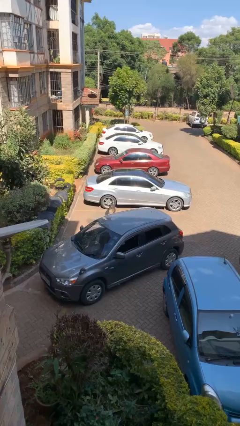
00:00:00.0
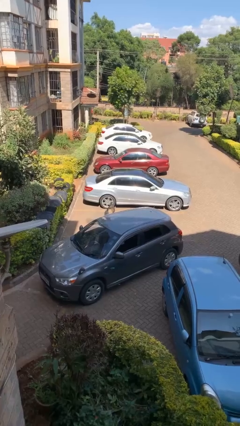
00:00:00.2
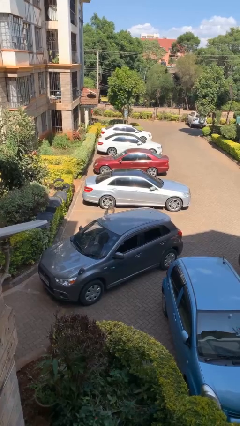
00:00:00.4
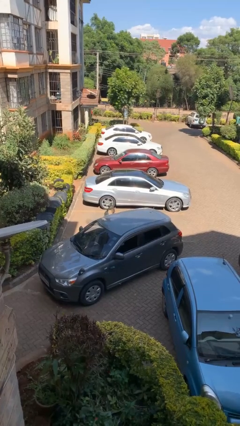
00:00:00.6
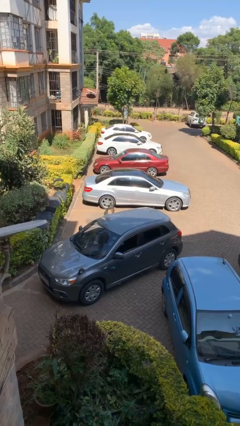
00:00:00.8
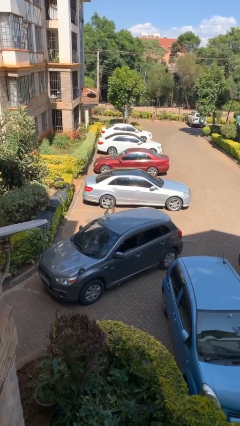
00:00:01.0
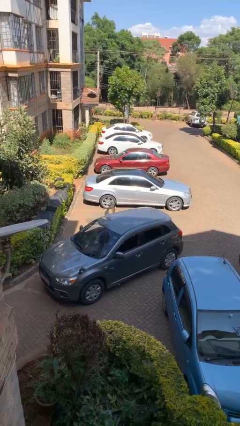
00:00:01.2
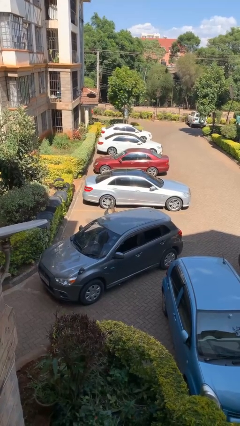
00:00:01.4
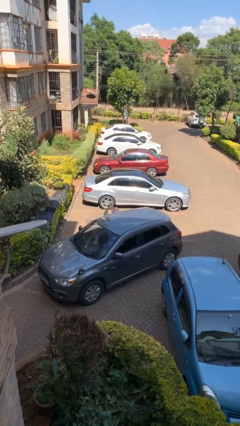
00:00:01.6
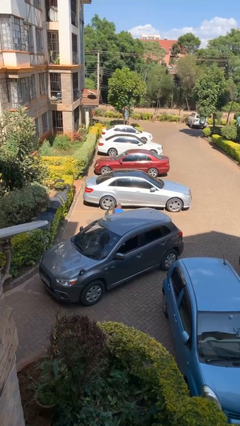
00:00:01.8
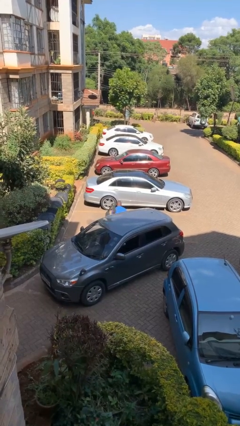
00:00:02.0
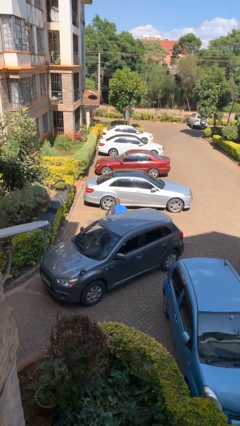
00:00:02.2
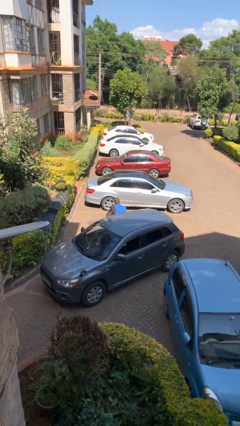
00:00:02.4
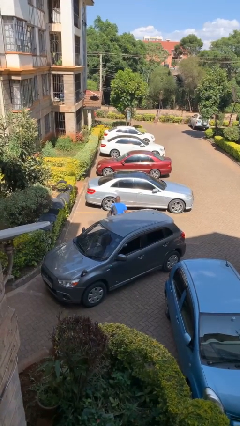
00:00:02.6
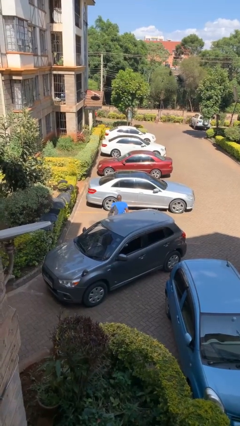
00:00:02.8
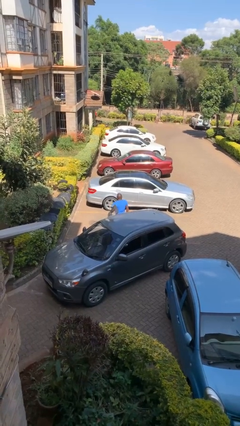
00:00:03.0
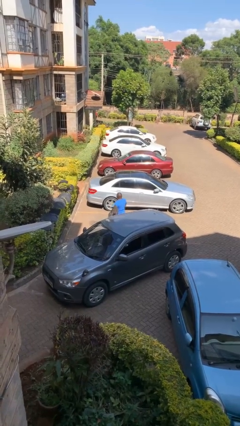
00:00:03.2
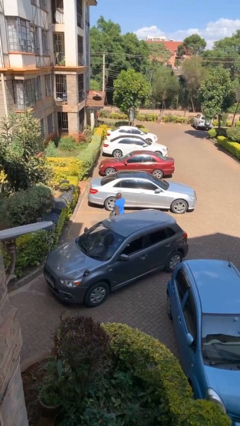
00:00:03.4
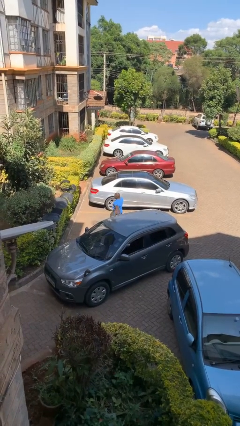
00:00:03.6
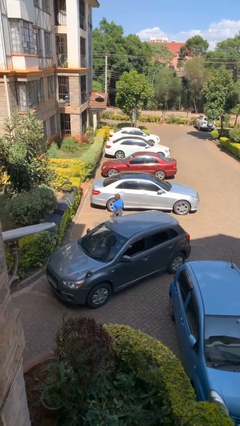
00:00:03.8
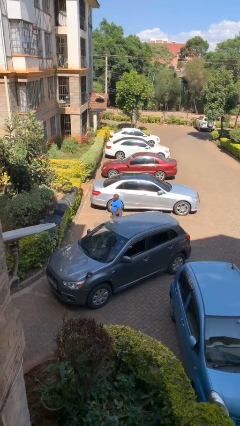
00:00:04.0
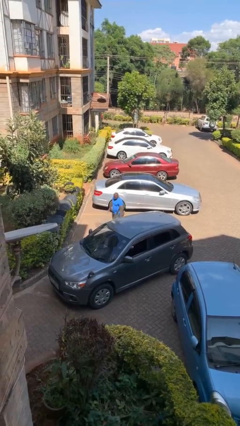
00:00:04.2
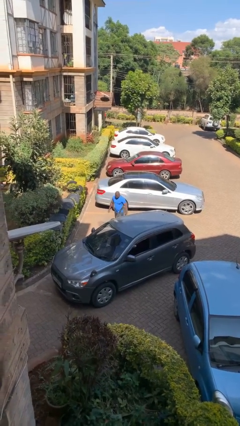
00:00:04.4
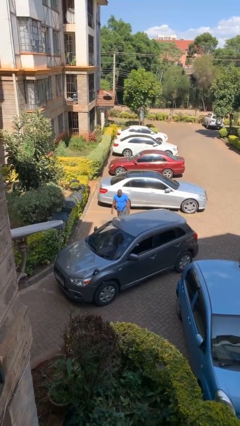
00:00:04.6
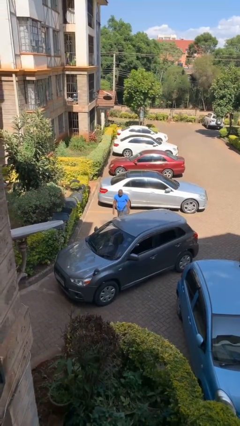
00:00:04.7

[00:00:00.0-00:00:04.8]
person exits car

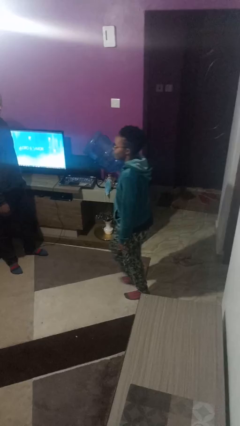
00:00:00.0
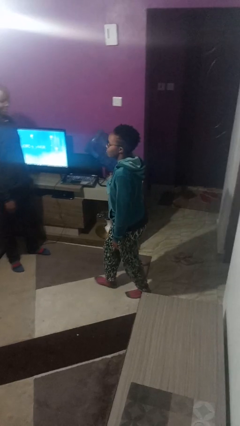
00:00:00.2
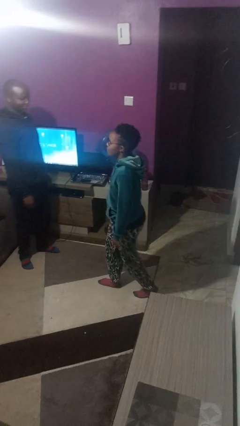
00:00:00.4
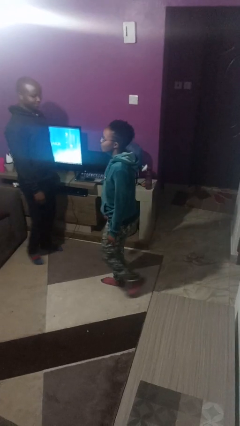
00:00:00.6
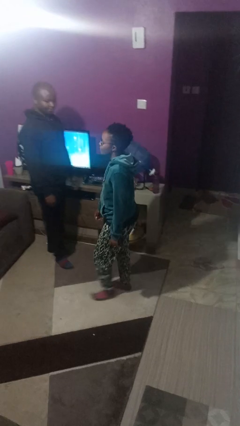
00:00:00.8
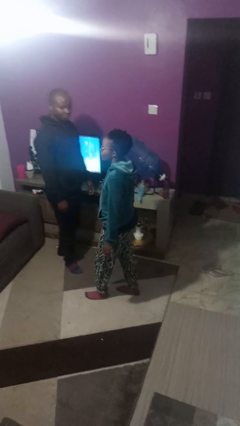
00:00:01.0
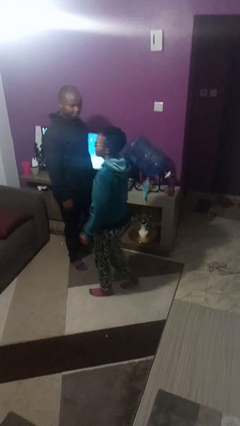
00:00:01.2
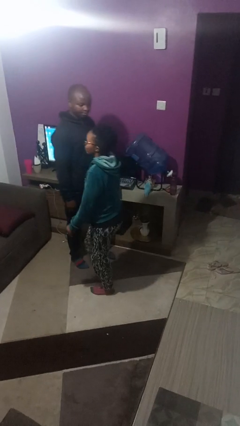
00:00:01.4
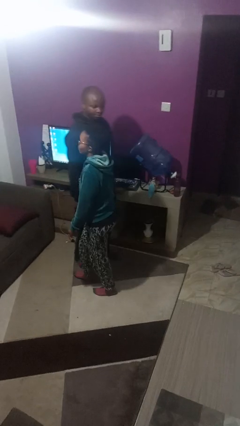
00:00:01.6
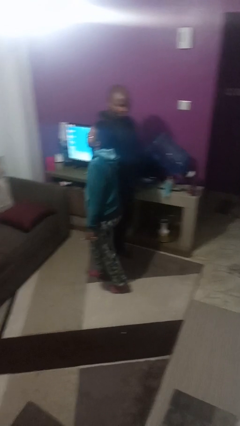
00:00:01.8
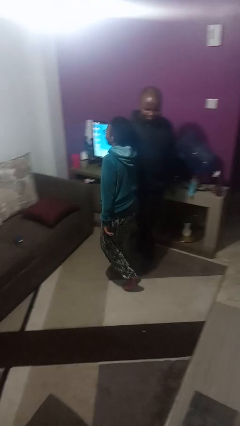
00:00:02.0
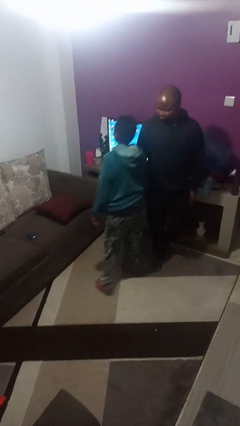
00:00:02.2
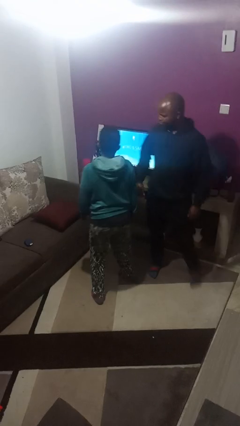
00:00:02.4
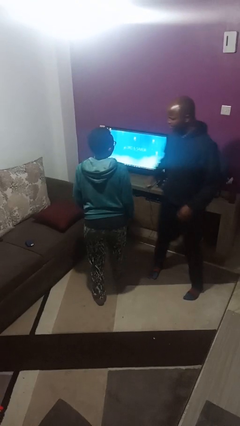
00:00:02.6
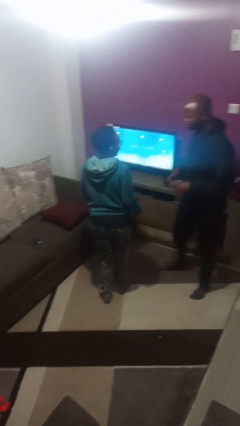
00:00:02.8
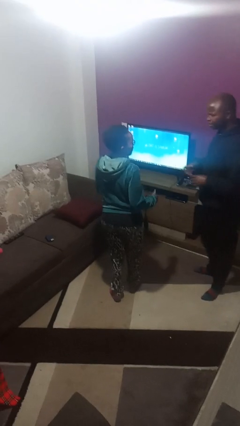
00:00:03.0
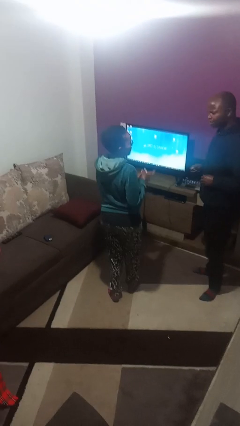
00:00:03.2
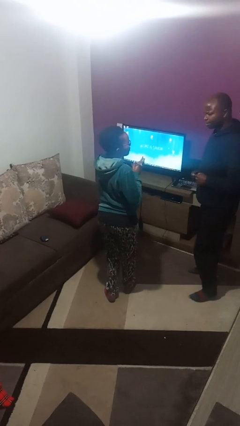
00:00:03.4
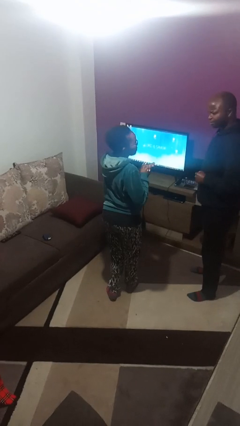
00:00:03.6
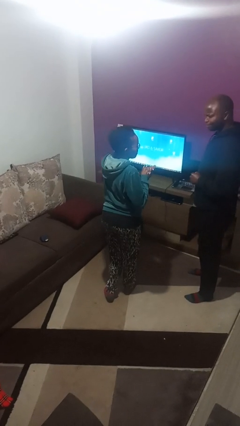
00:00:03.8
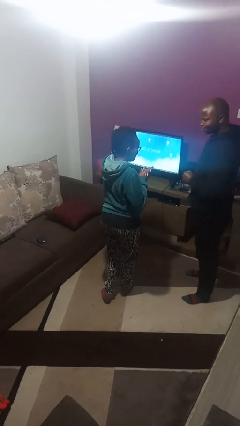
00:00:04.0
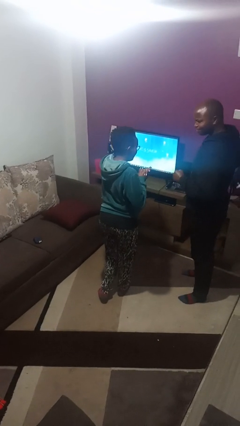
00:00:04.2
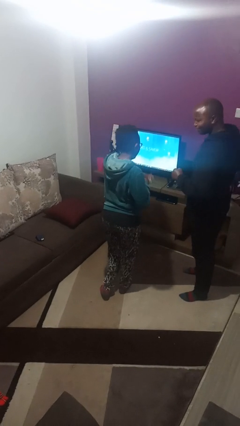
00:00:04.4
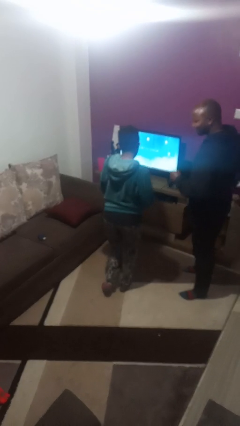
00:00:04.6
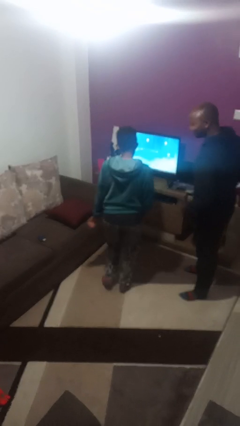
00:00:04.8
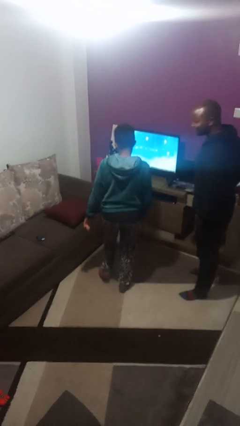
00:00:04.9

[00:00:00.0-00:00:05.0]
person bumps into person

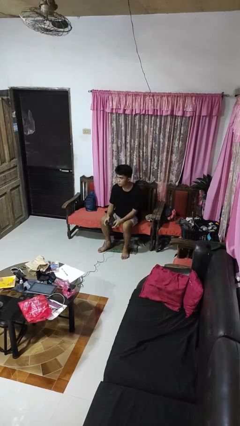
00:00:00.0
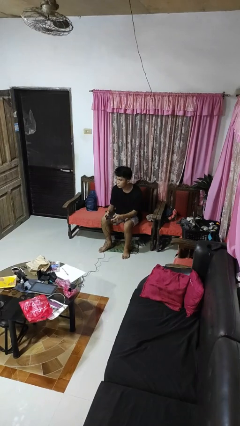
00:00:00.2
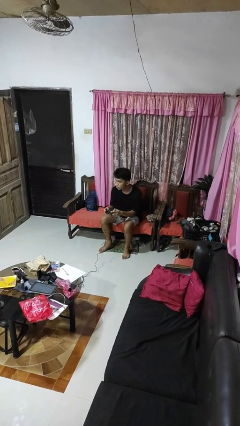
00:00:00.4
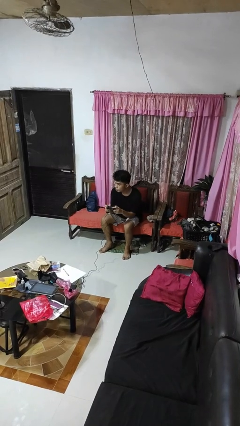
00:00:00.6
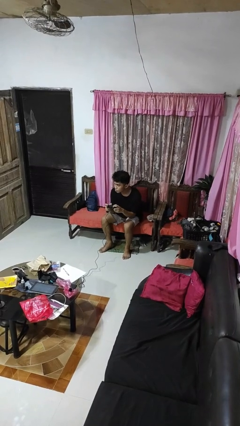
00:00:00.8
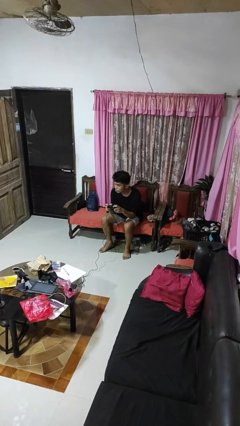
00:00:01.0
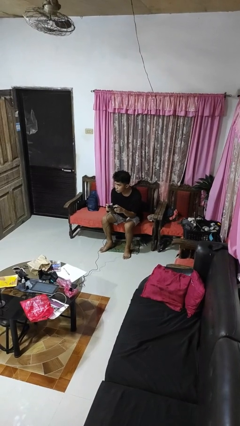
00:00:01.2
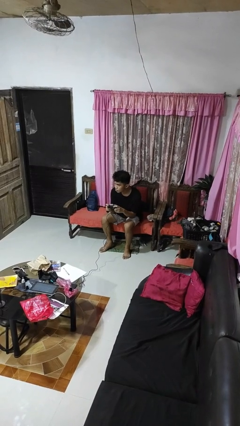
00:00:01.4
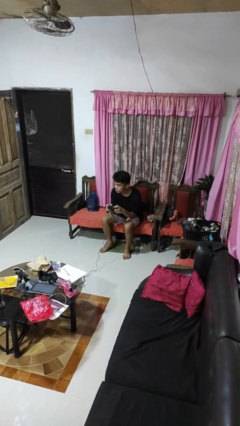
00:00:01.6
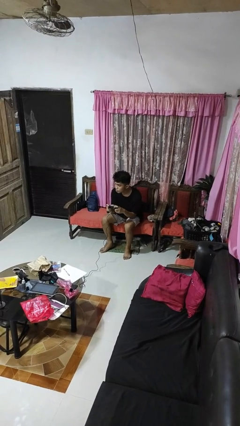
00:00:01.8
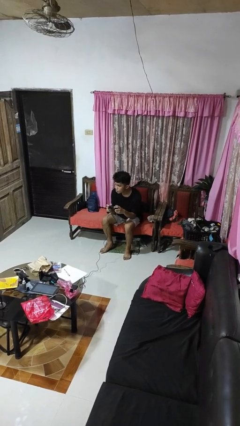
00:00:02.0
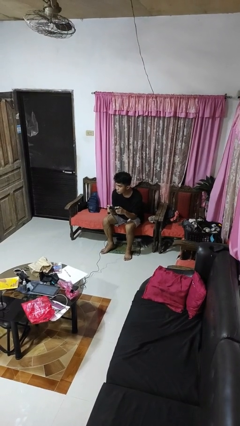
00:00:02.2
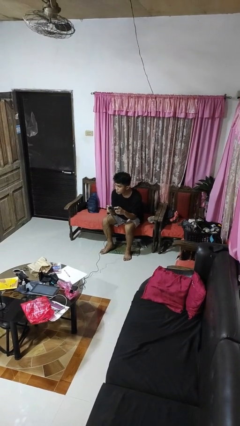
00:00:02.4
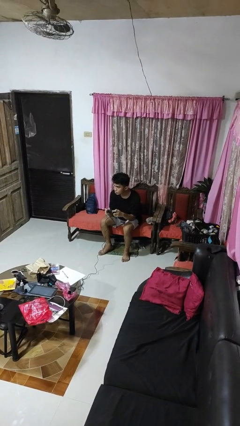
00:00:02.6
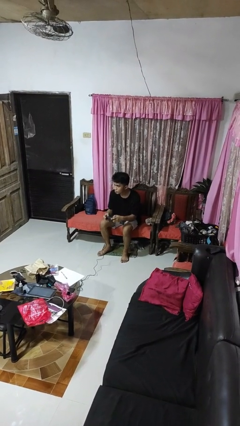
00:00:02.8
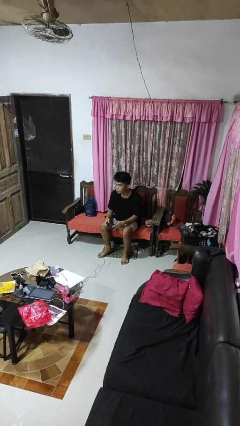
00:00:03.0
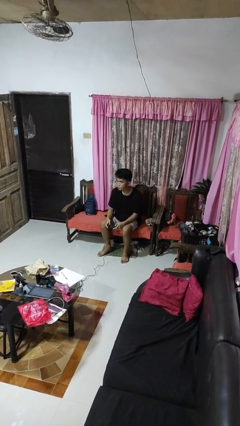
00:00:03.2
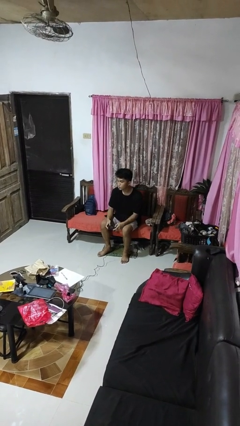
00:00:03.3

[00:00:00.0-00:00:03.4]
person interacts with handheld game

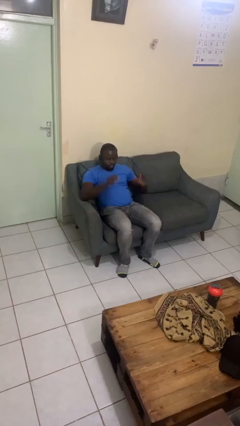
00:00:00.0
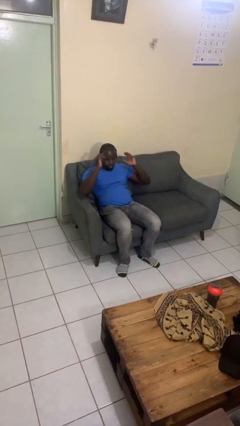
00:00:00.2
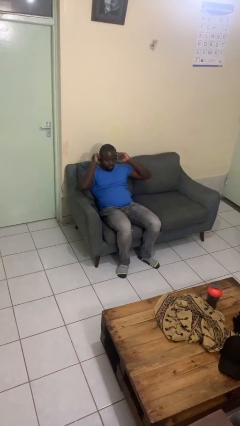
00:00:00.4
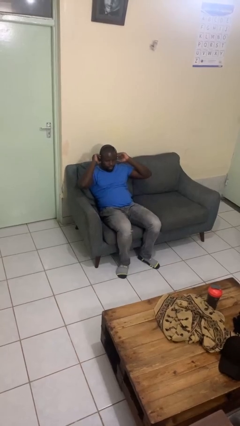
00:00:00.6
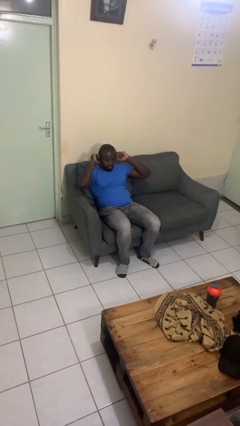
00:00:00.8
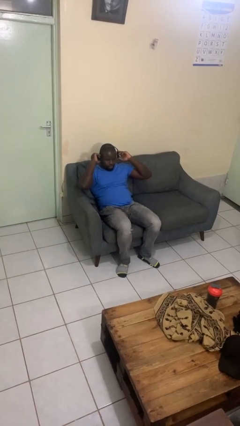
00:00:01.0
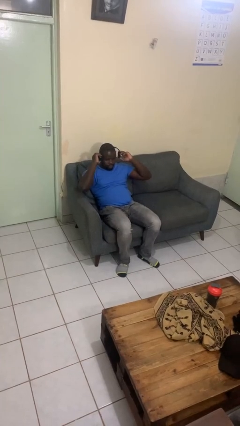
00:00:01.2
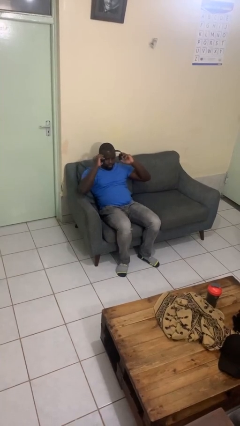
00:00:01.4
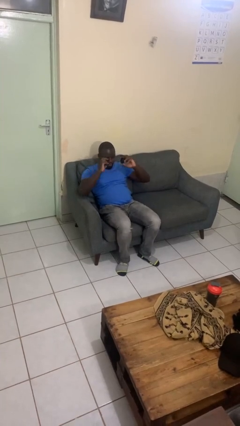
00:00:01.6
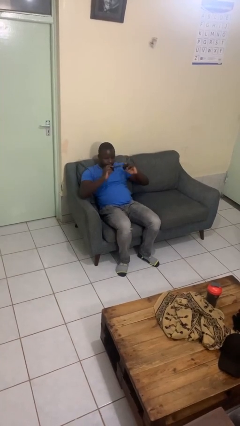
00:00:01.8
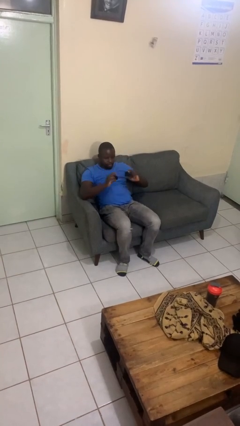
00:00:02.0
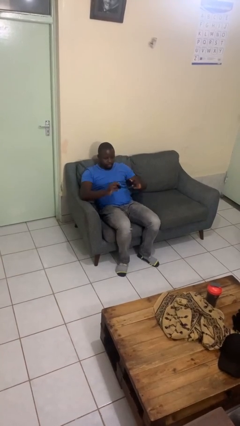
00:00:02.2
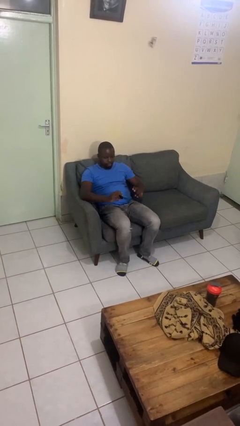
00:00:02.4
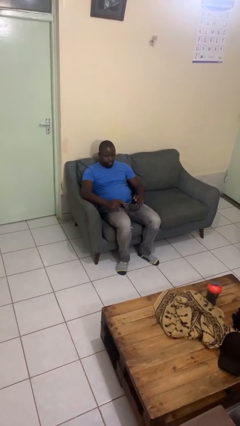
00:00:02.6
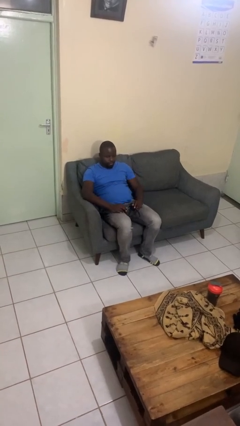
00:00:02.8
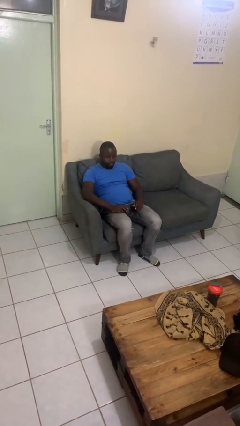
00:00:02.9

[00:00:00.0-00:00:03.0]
person takes off headphones

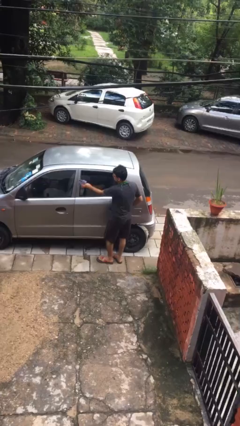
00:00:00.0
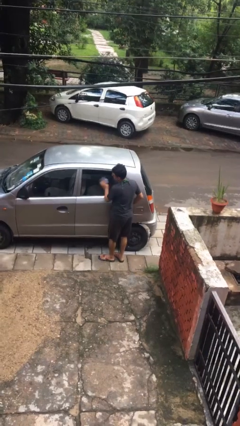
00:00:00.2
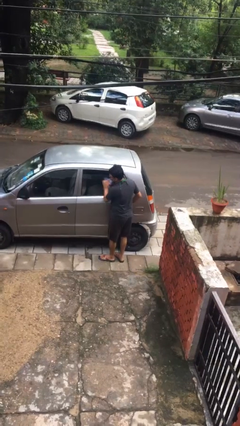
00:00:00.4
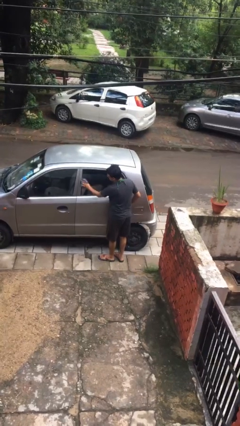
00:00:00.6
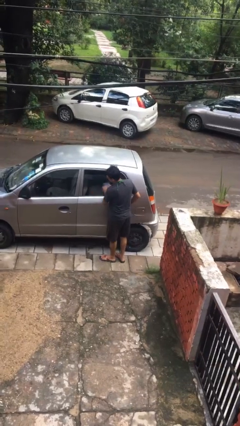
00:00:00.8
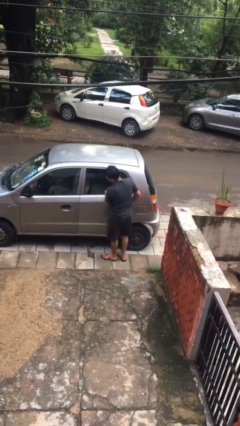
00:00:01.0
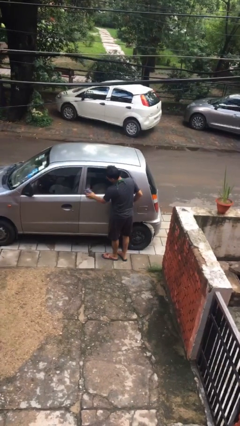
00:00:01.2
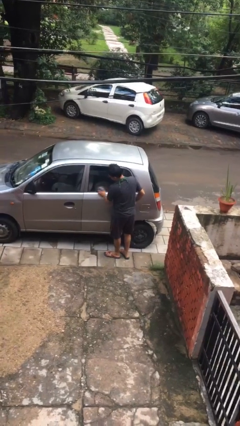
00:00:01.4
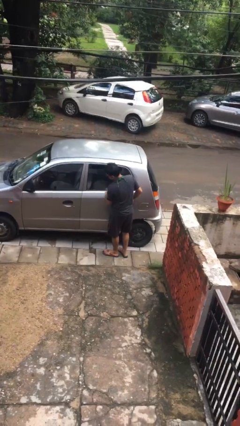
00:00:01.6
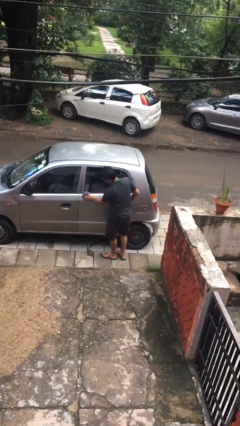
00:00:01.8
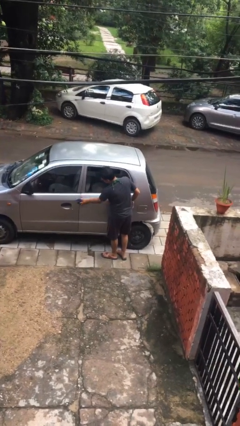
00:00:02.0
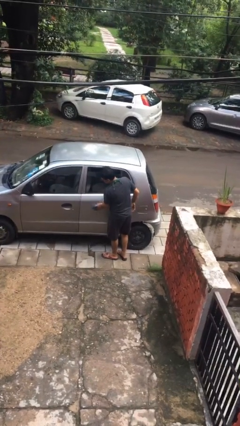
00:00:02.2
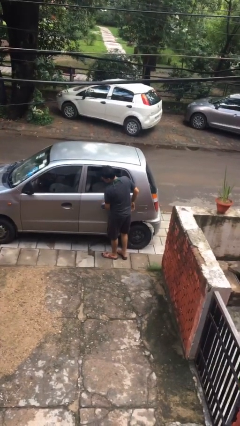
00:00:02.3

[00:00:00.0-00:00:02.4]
person polishes car with rag
